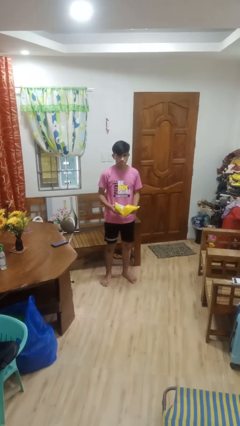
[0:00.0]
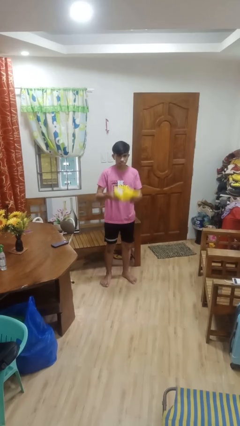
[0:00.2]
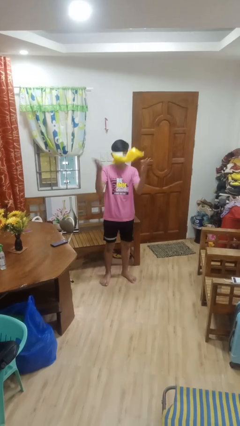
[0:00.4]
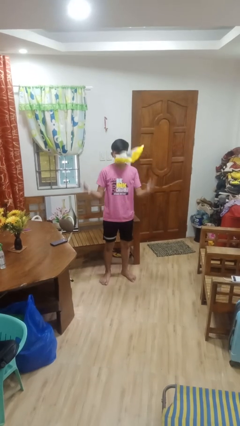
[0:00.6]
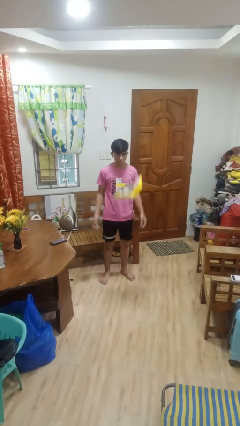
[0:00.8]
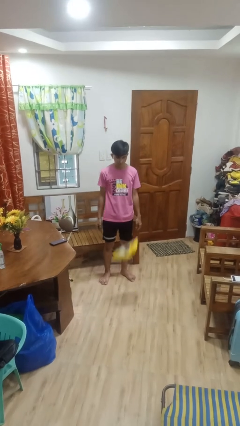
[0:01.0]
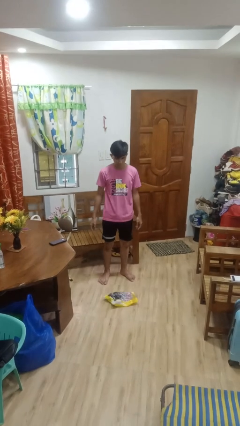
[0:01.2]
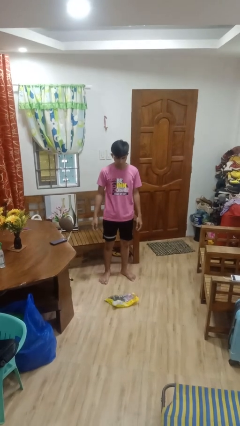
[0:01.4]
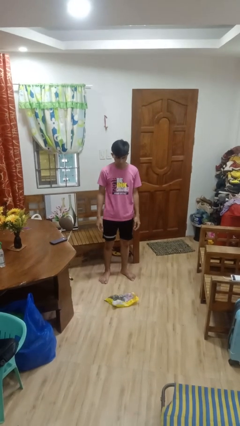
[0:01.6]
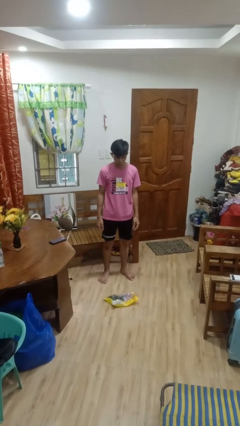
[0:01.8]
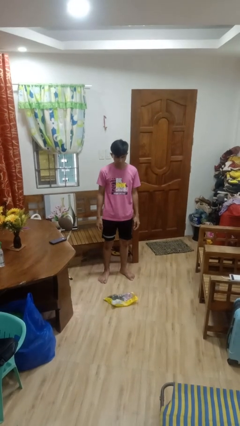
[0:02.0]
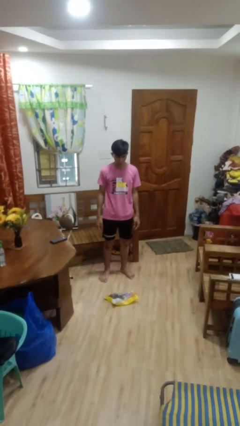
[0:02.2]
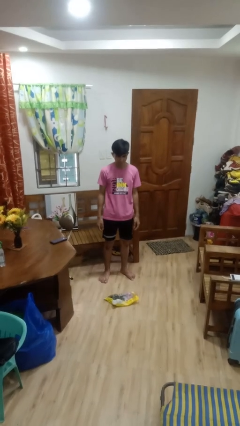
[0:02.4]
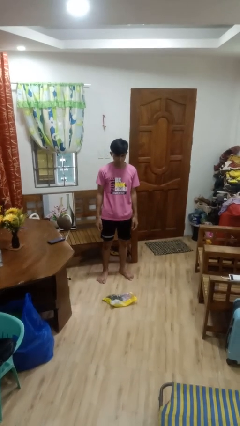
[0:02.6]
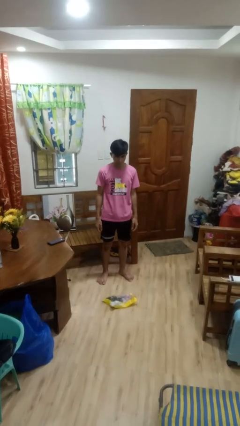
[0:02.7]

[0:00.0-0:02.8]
person throws object into air

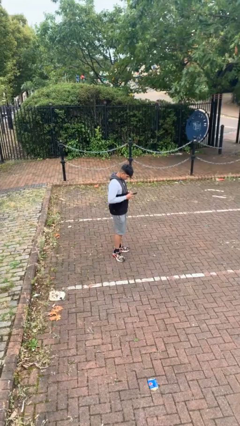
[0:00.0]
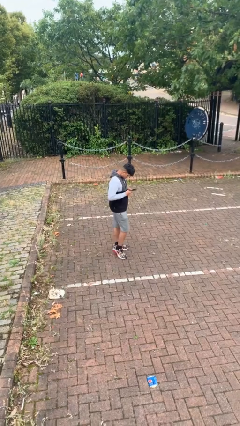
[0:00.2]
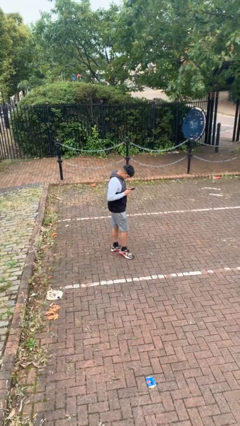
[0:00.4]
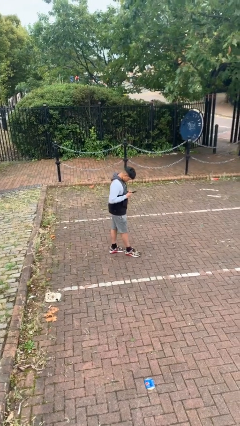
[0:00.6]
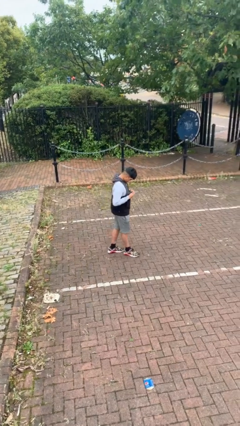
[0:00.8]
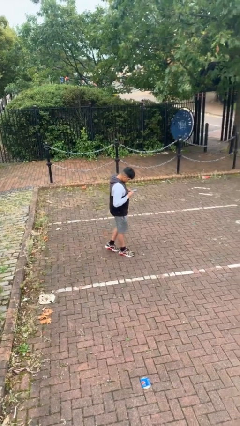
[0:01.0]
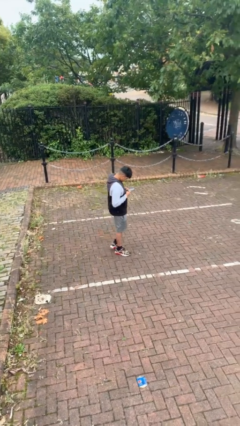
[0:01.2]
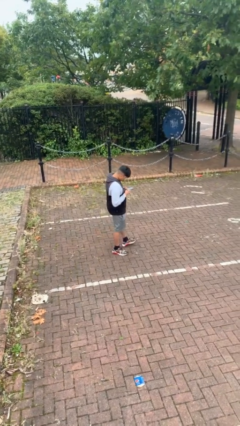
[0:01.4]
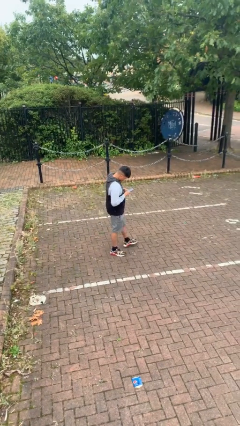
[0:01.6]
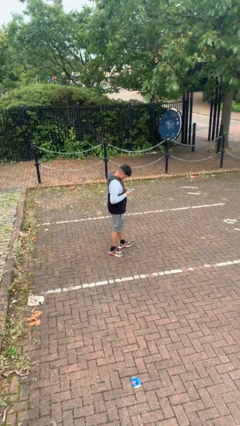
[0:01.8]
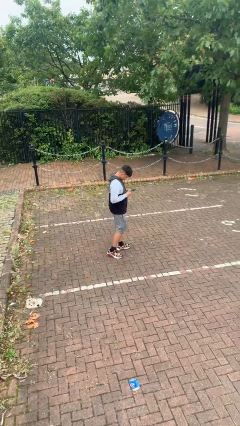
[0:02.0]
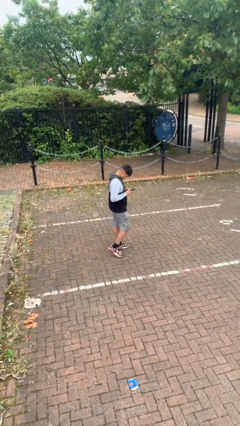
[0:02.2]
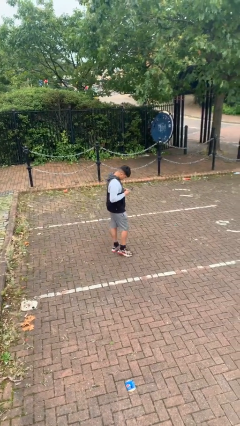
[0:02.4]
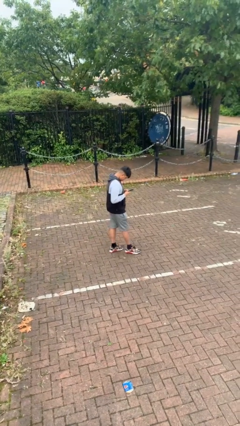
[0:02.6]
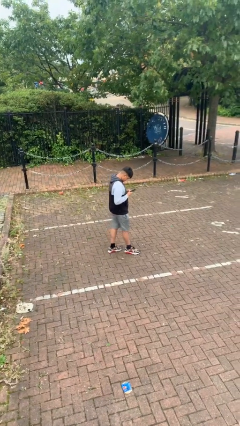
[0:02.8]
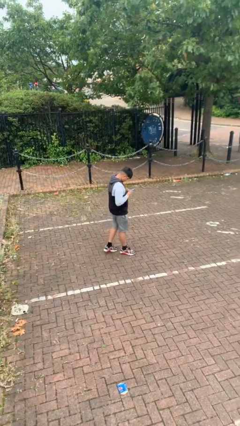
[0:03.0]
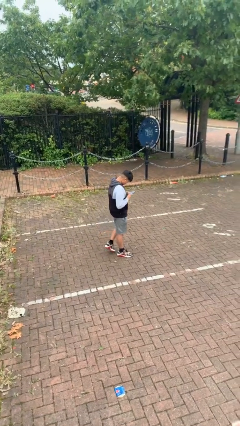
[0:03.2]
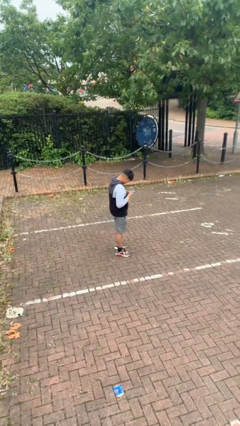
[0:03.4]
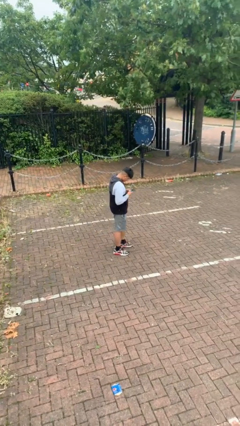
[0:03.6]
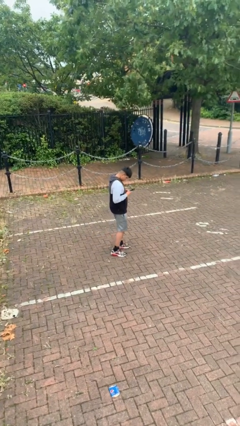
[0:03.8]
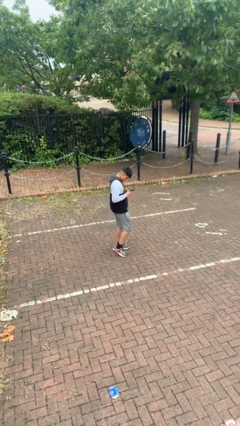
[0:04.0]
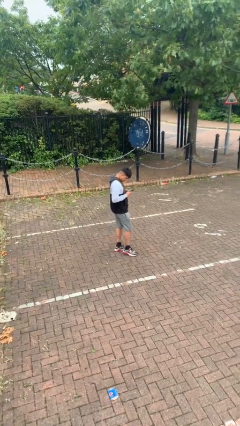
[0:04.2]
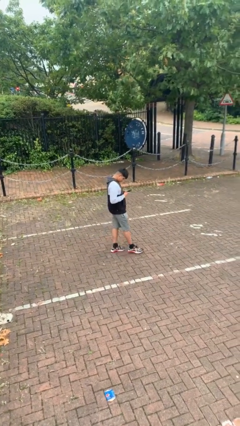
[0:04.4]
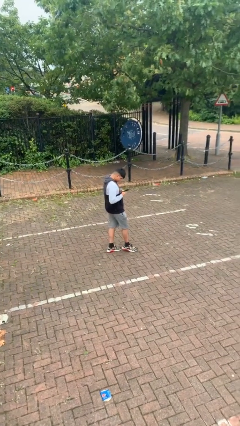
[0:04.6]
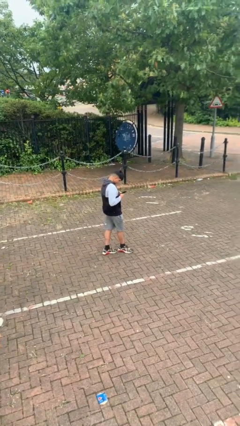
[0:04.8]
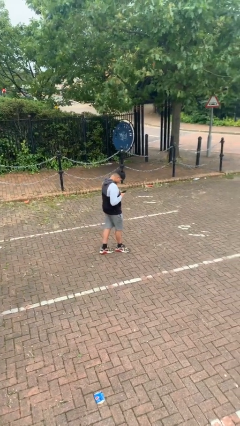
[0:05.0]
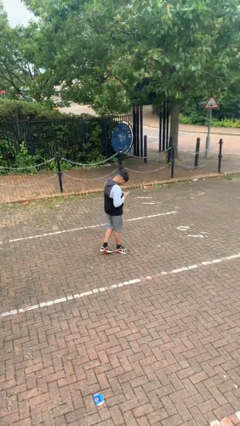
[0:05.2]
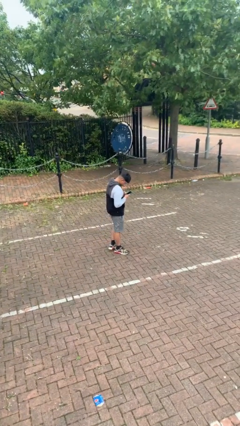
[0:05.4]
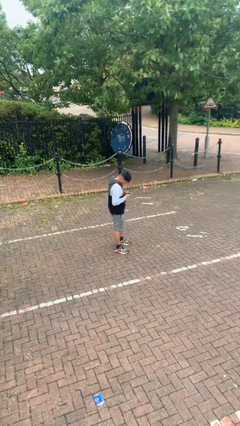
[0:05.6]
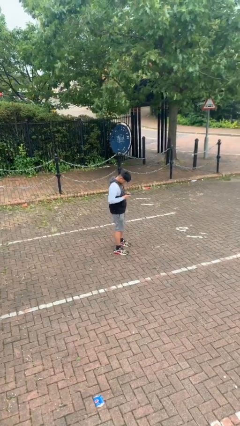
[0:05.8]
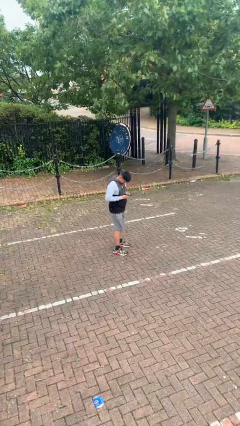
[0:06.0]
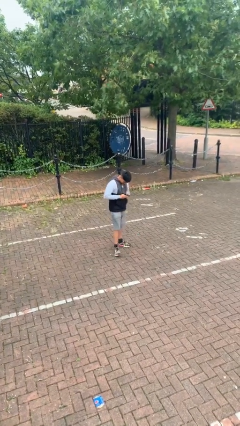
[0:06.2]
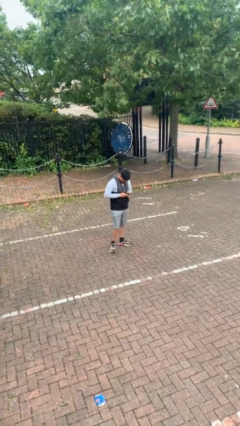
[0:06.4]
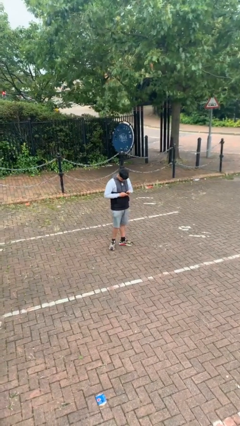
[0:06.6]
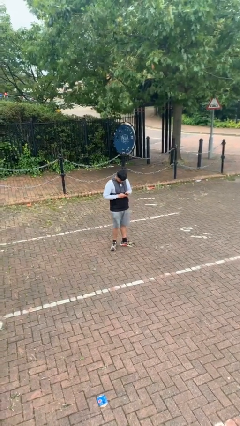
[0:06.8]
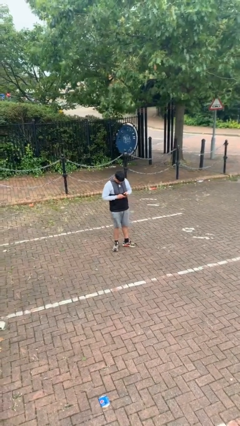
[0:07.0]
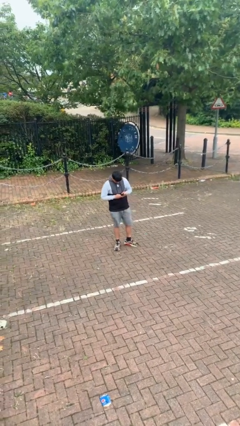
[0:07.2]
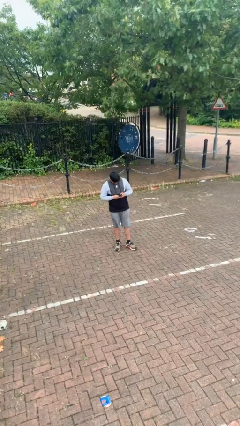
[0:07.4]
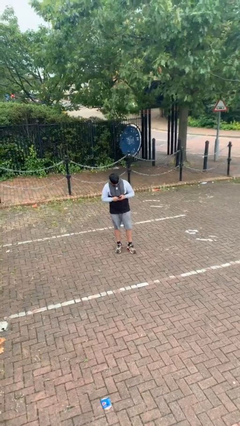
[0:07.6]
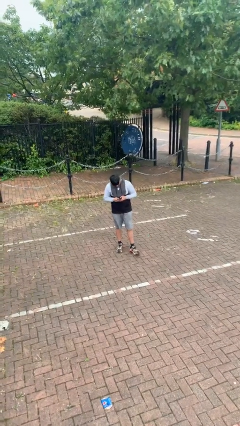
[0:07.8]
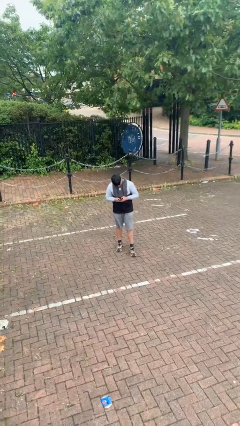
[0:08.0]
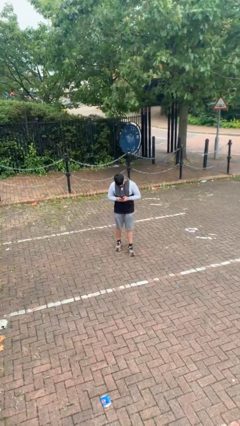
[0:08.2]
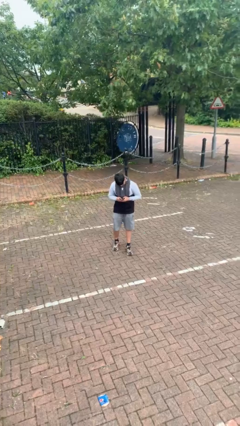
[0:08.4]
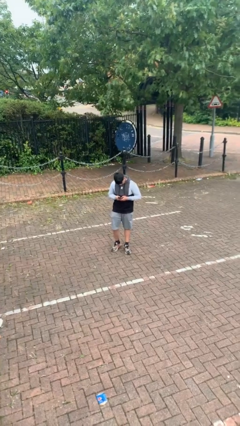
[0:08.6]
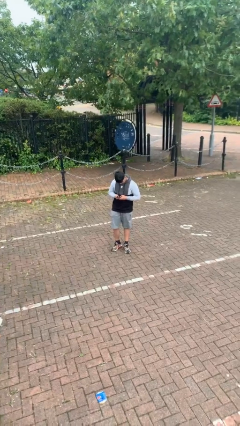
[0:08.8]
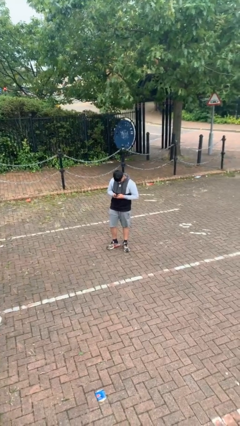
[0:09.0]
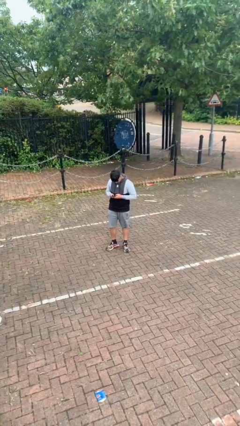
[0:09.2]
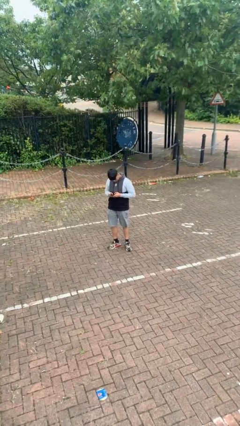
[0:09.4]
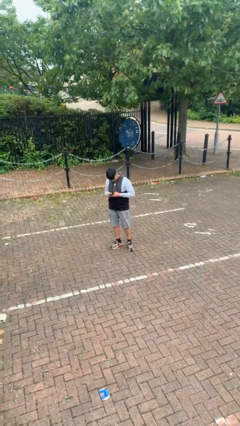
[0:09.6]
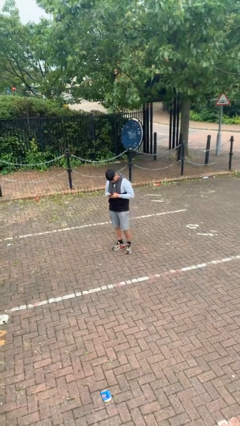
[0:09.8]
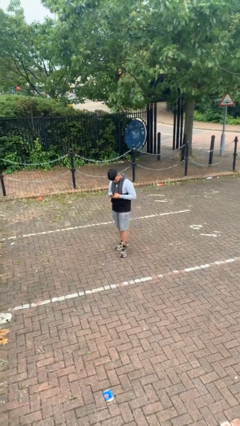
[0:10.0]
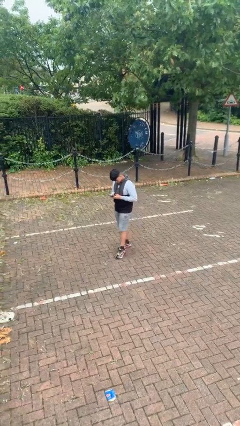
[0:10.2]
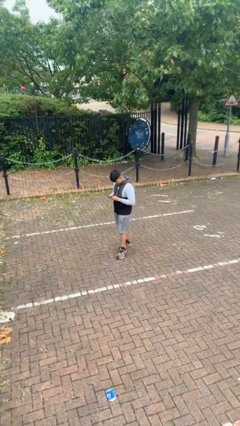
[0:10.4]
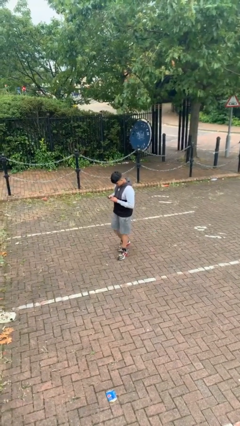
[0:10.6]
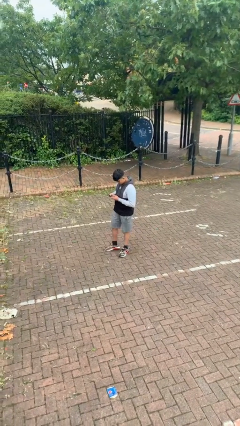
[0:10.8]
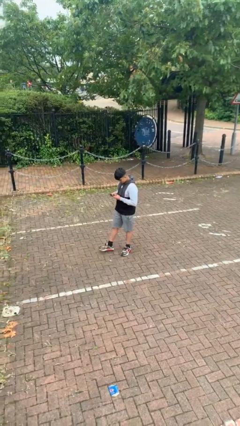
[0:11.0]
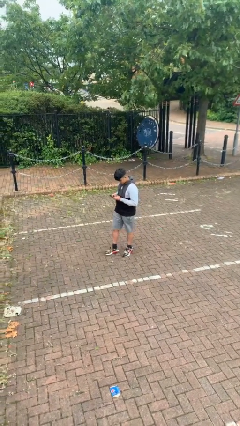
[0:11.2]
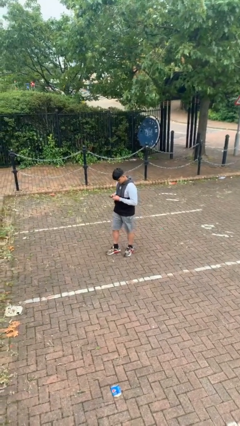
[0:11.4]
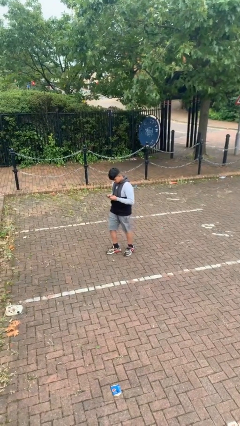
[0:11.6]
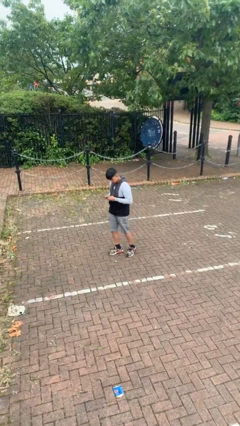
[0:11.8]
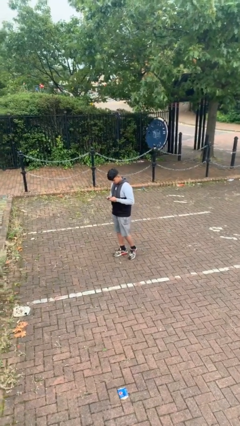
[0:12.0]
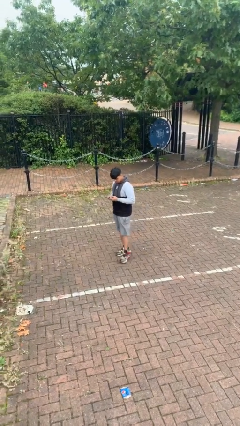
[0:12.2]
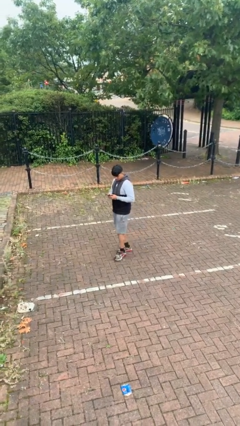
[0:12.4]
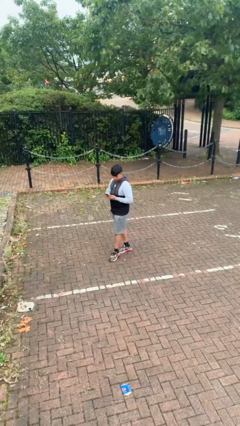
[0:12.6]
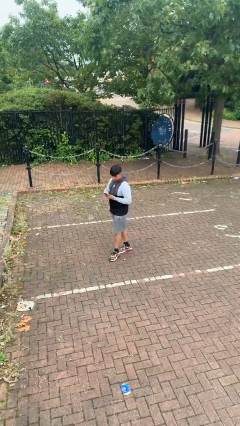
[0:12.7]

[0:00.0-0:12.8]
person texts on phone

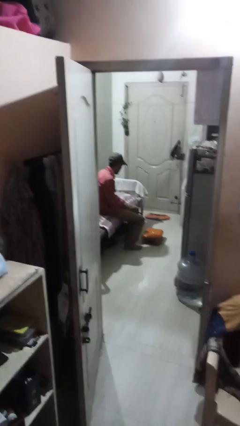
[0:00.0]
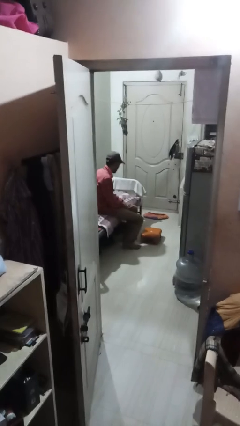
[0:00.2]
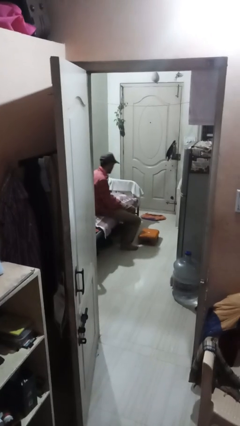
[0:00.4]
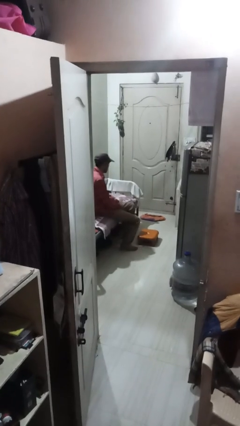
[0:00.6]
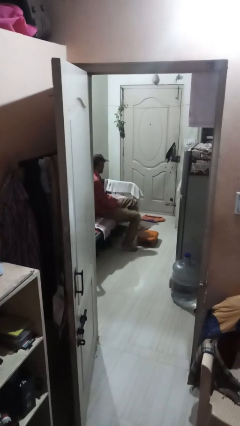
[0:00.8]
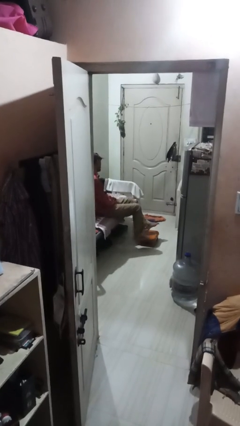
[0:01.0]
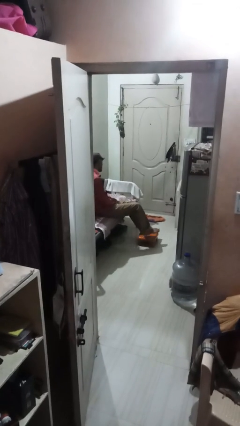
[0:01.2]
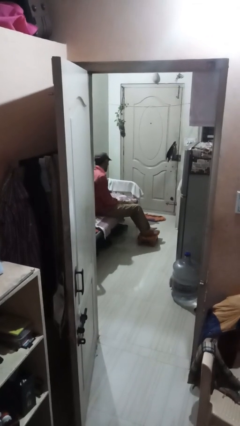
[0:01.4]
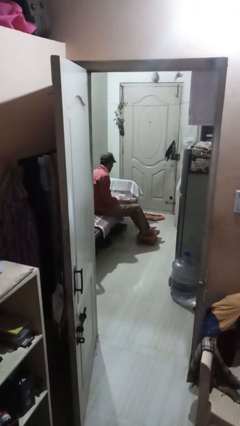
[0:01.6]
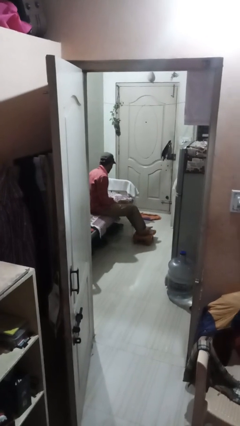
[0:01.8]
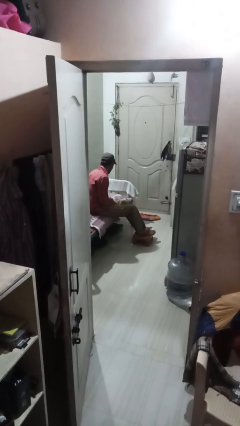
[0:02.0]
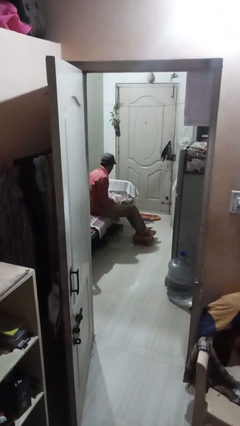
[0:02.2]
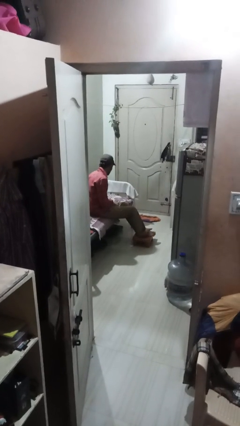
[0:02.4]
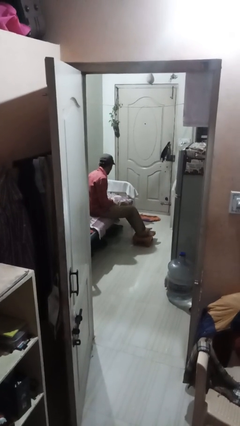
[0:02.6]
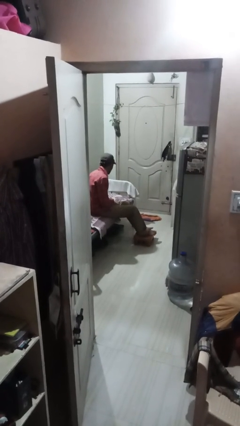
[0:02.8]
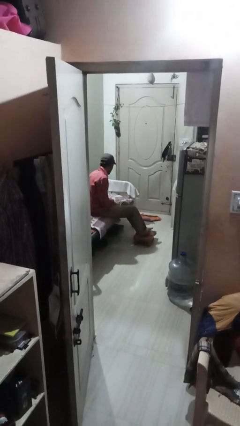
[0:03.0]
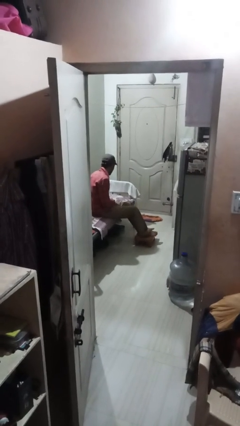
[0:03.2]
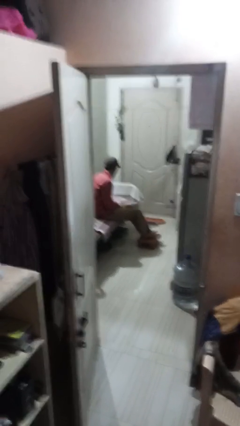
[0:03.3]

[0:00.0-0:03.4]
person puts feet up
